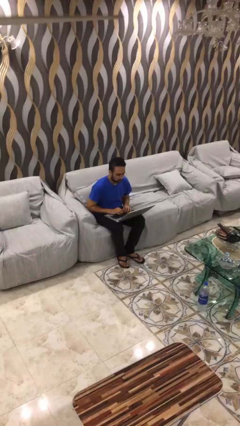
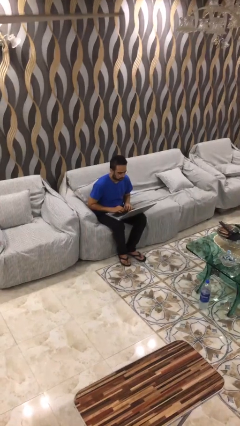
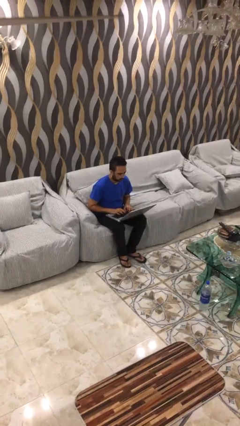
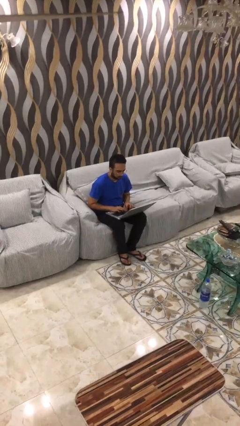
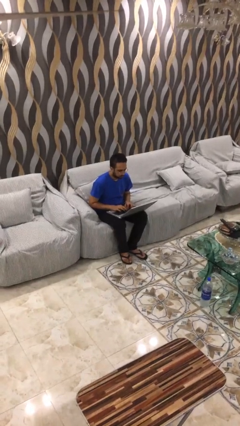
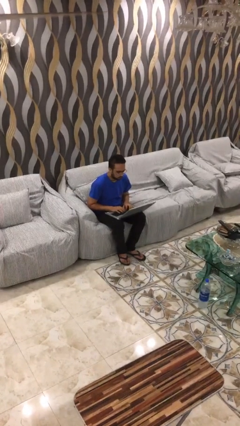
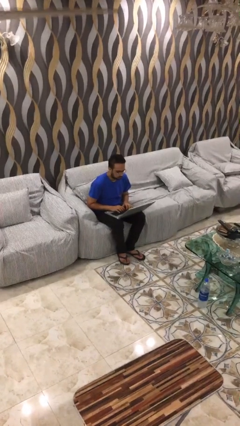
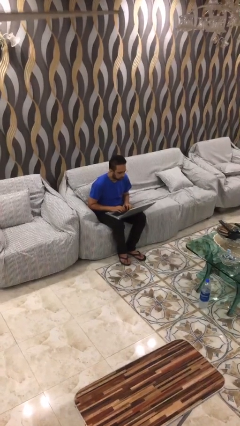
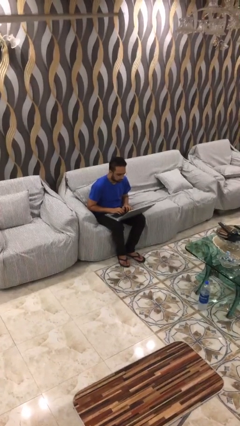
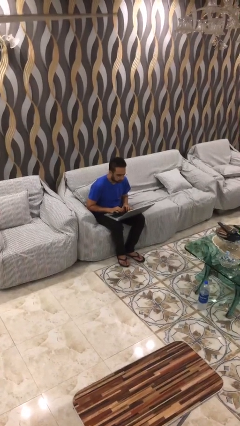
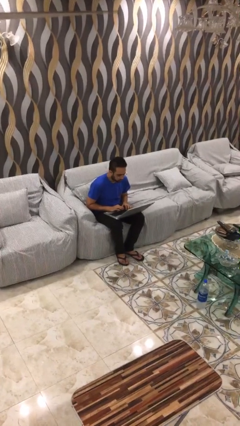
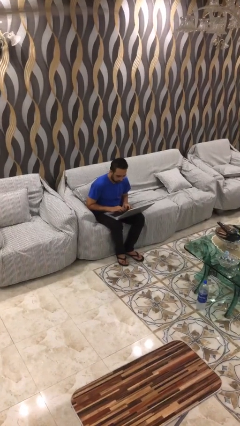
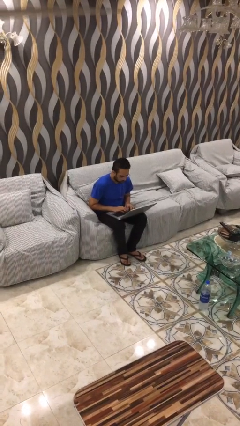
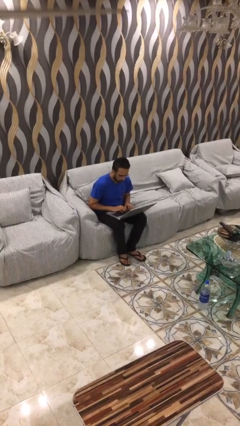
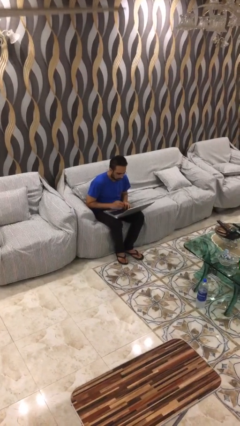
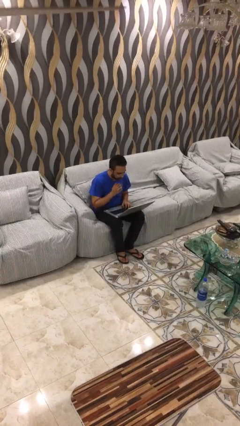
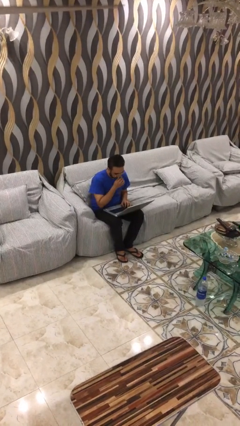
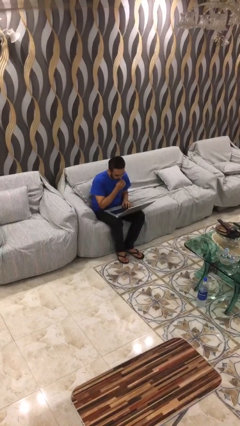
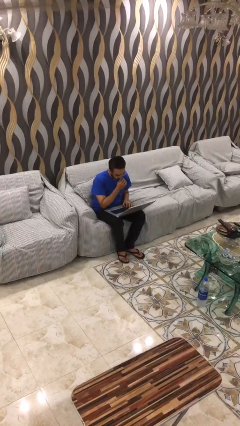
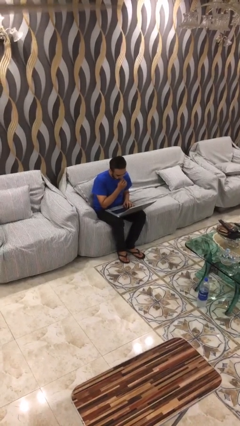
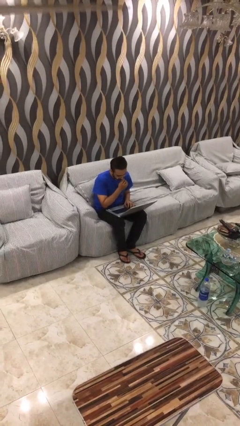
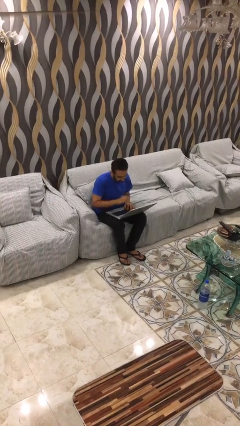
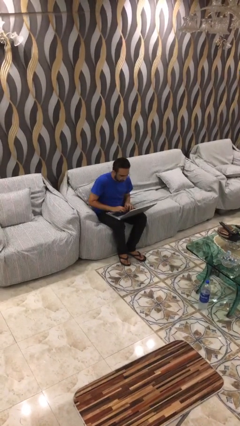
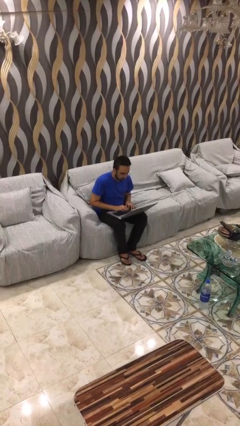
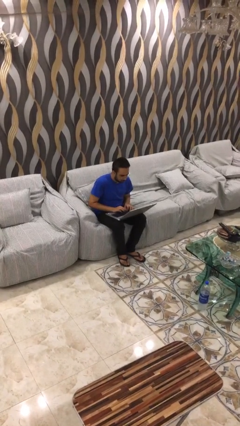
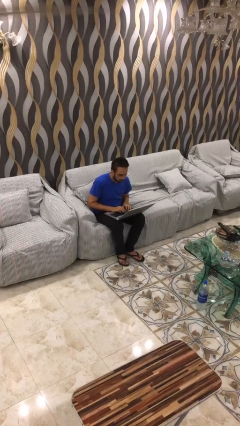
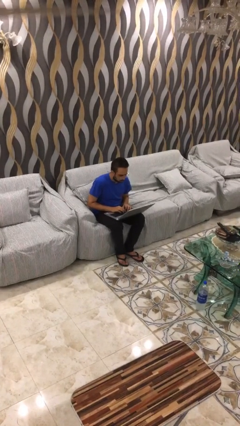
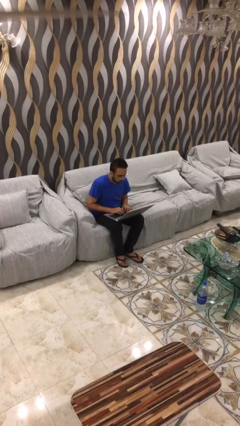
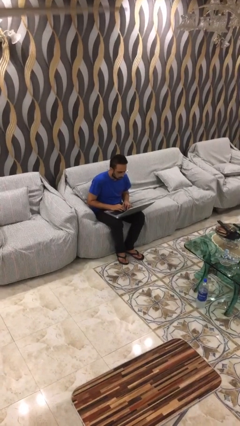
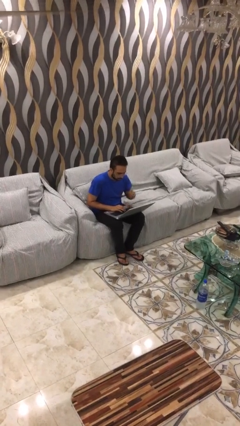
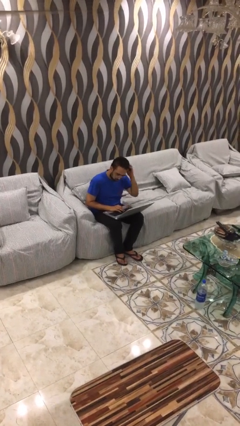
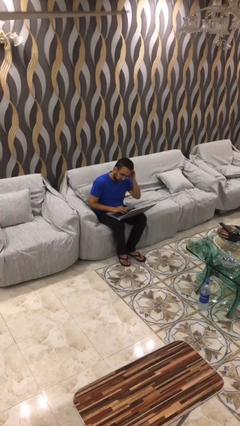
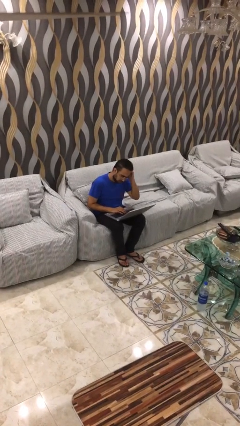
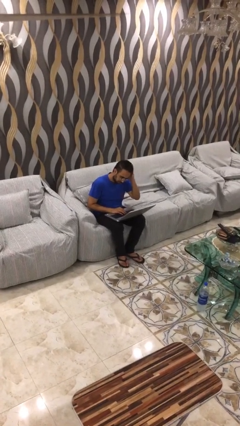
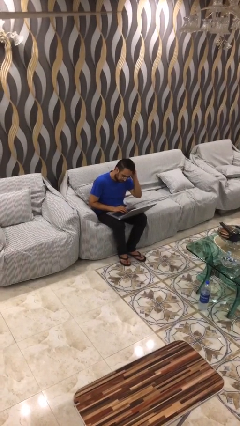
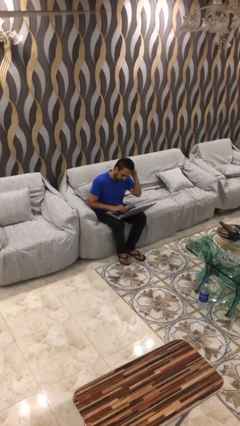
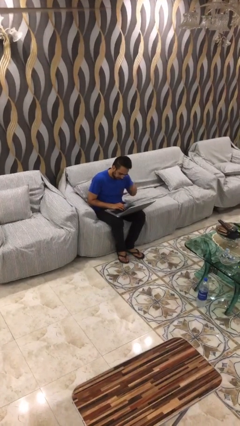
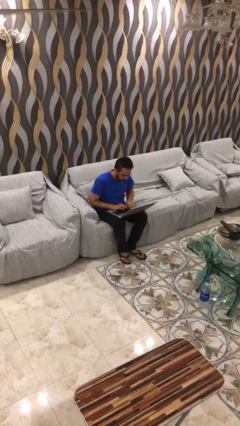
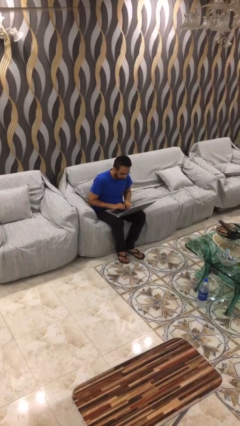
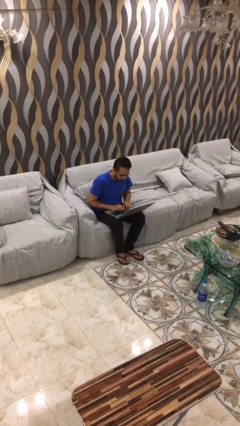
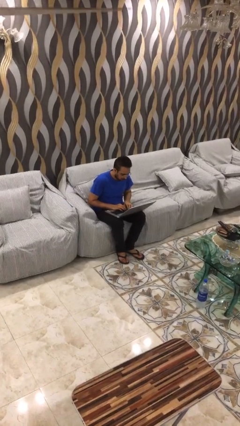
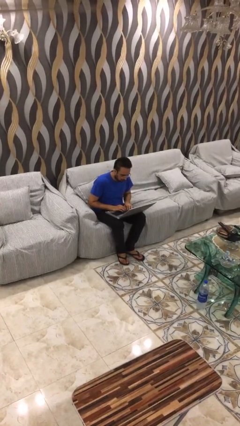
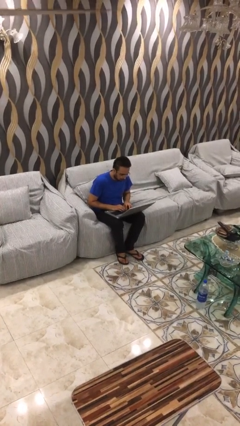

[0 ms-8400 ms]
person interacts with laptop

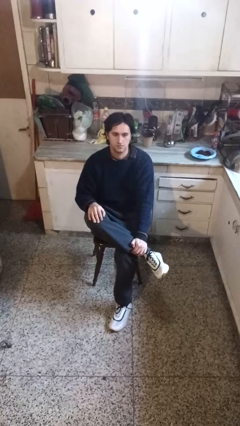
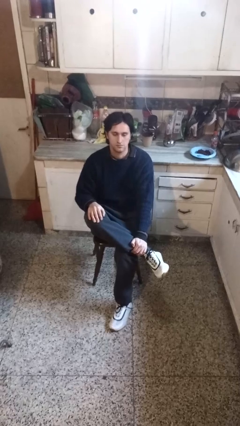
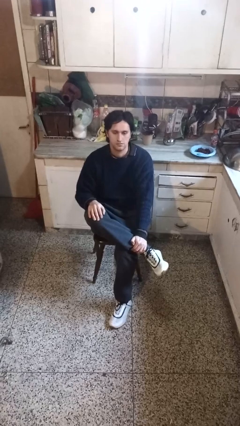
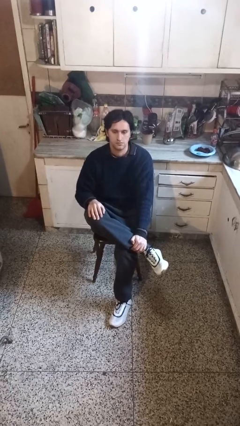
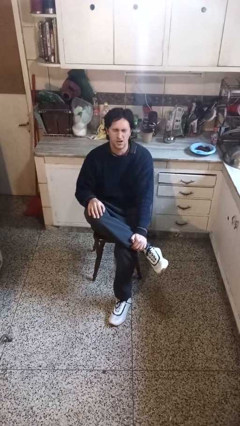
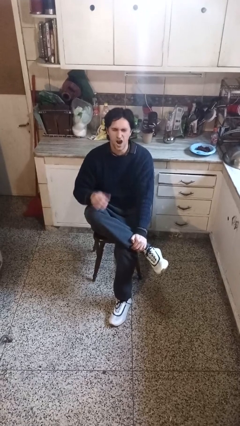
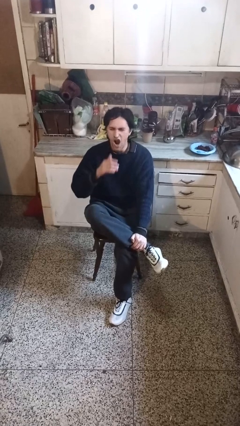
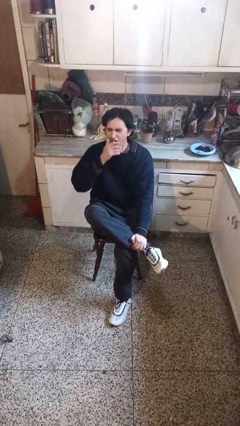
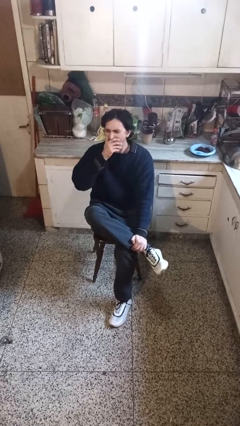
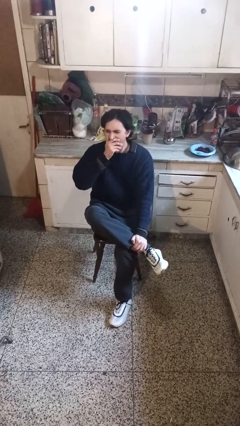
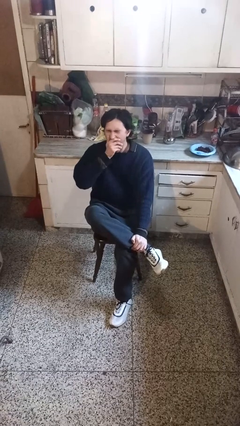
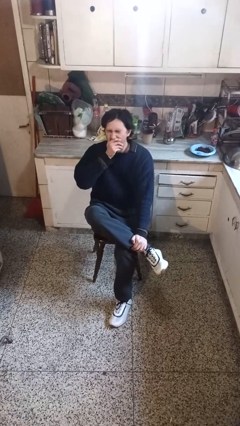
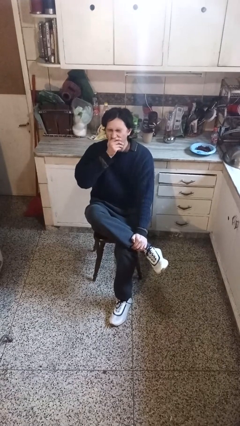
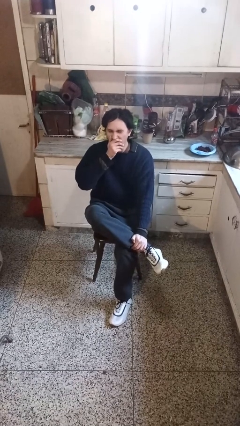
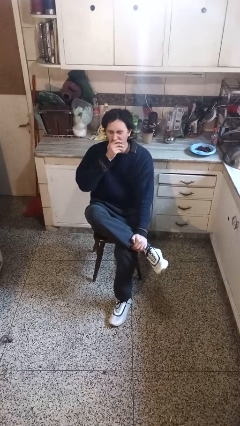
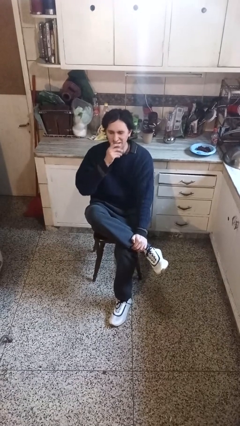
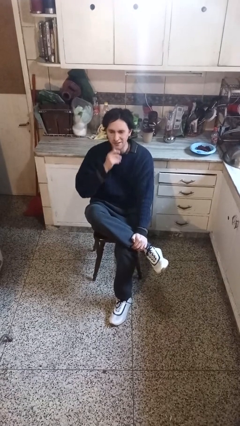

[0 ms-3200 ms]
person yawns

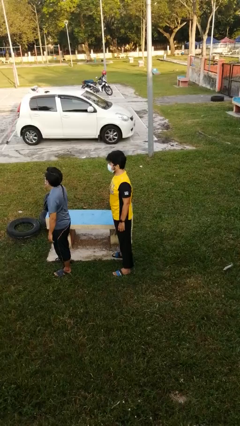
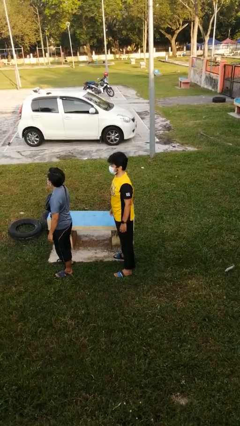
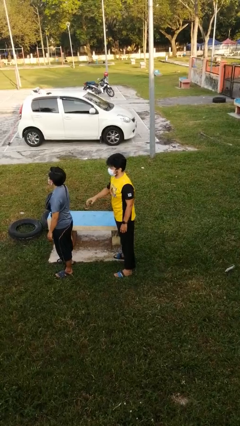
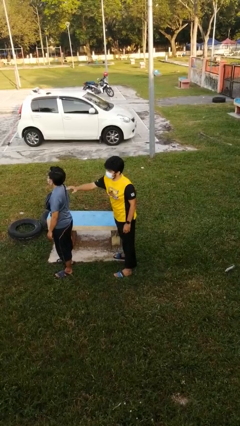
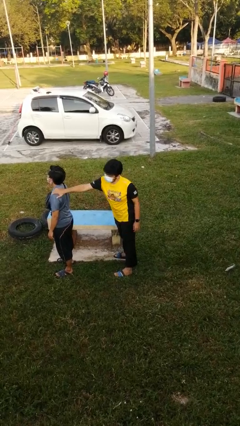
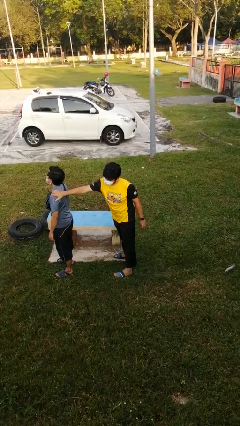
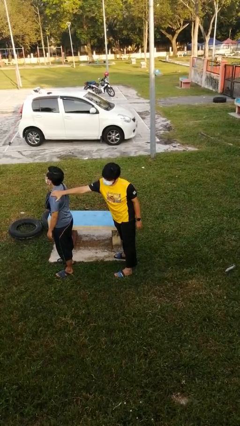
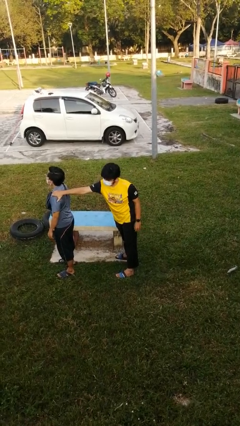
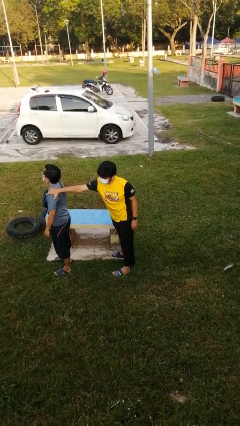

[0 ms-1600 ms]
person grabs person by shoulder

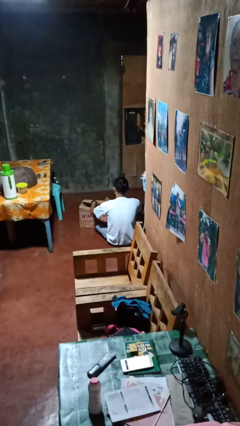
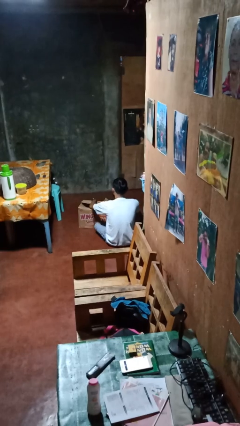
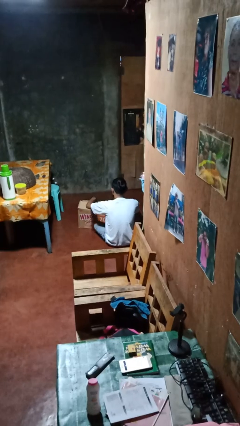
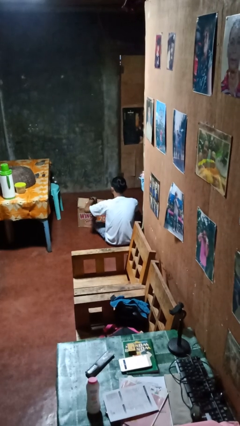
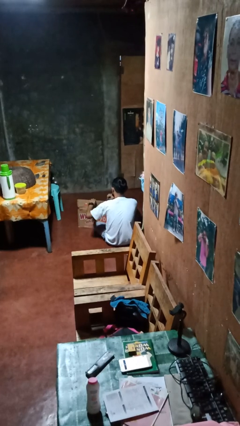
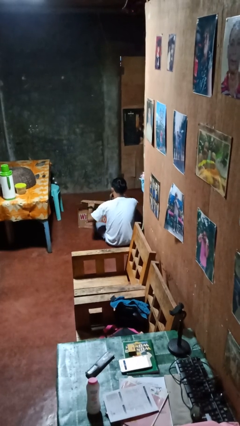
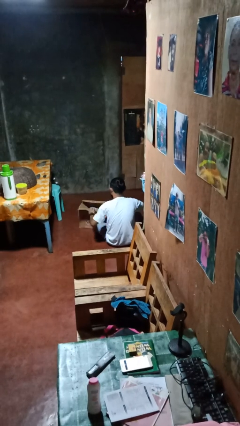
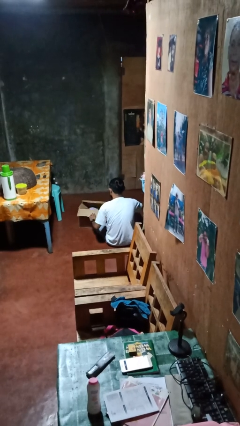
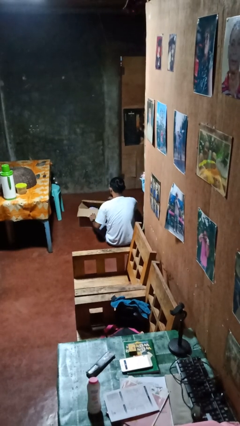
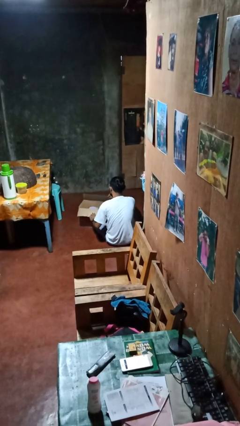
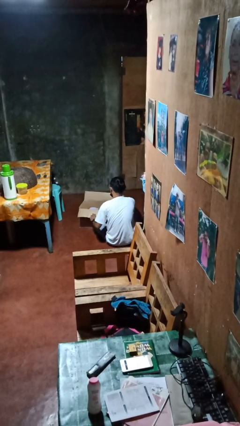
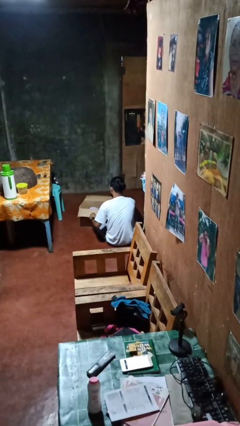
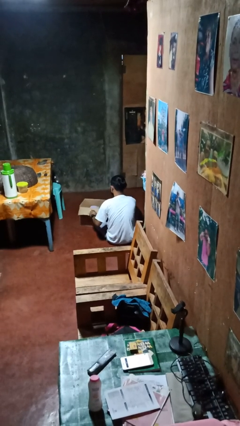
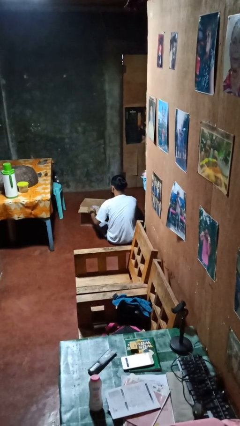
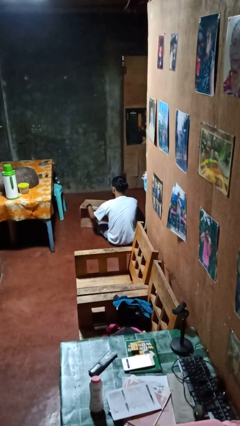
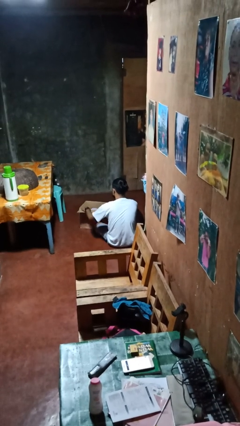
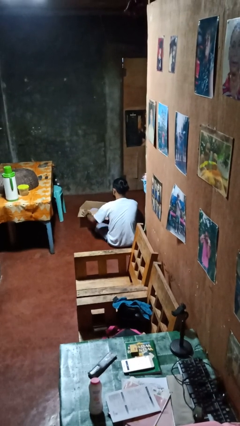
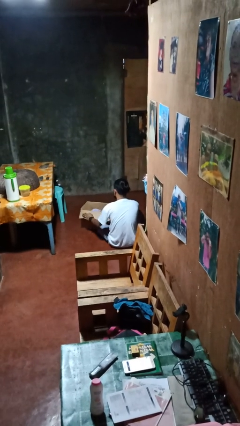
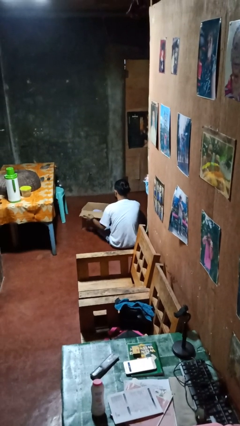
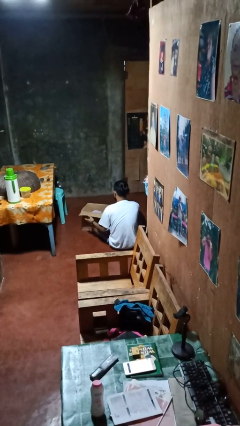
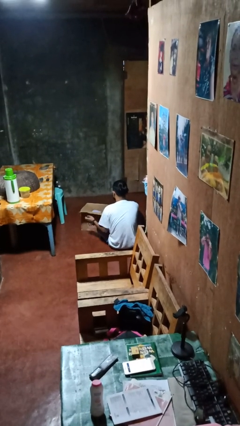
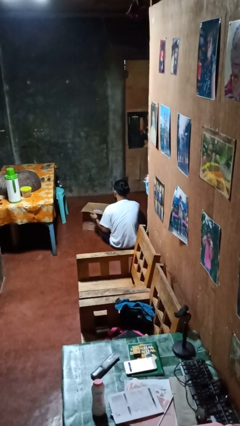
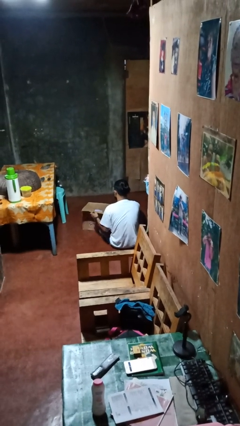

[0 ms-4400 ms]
person opens box
